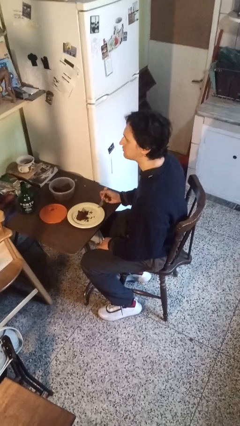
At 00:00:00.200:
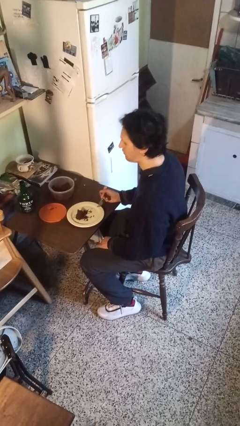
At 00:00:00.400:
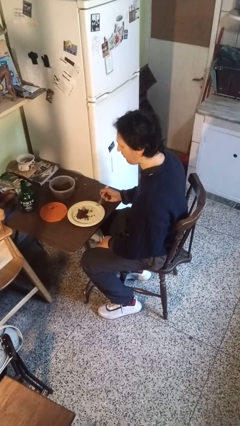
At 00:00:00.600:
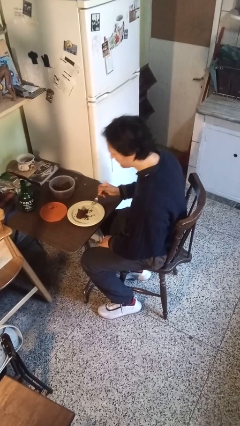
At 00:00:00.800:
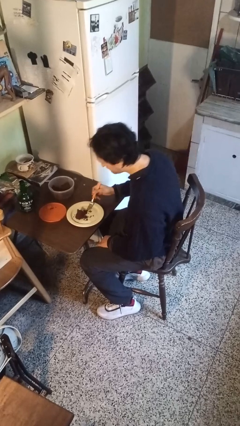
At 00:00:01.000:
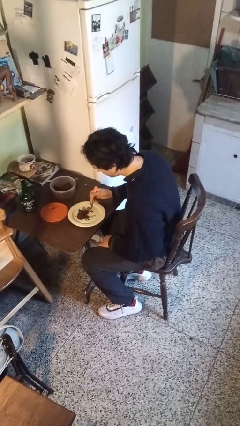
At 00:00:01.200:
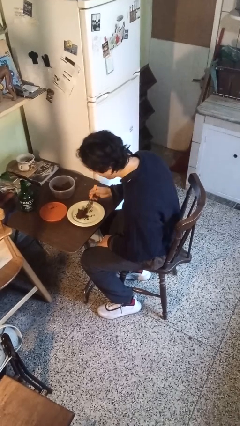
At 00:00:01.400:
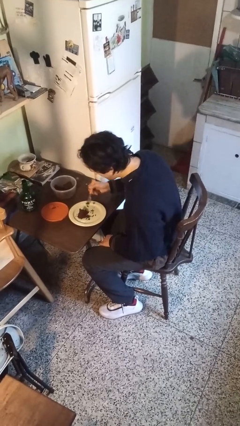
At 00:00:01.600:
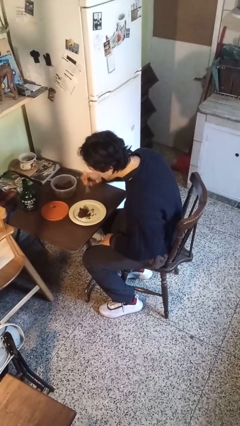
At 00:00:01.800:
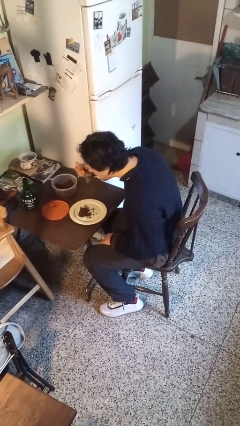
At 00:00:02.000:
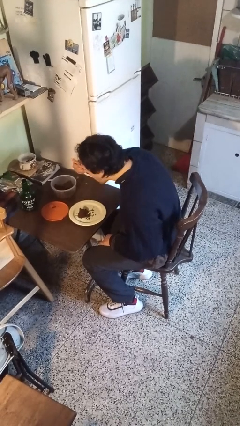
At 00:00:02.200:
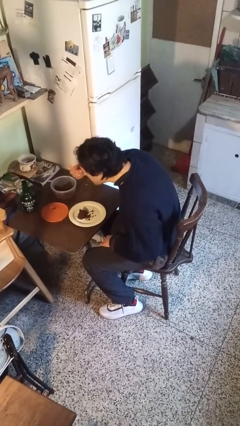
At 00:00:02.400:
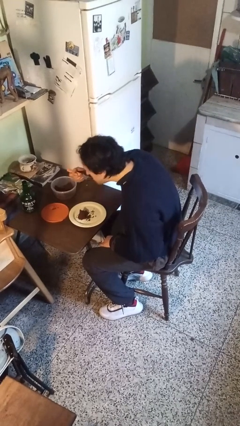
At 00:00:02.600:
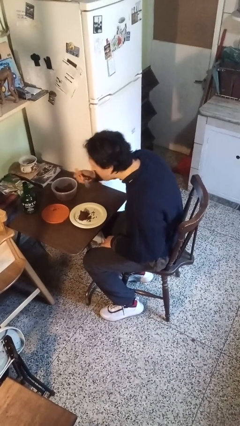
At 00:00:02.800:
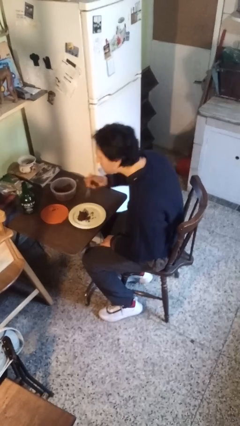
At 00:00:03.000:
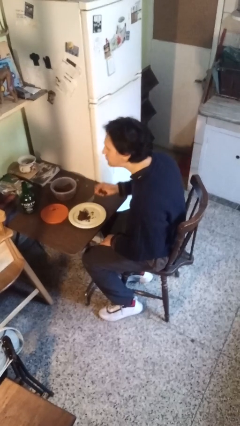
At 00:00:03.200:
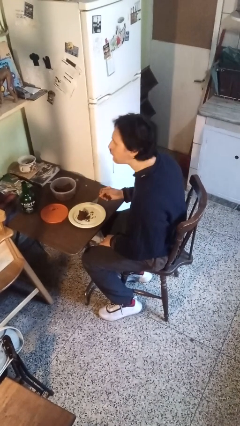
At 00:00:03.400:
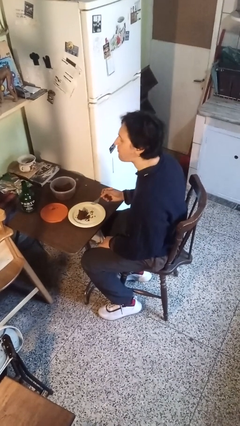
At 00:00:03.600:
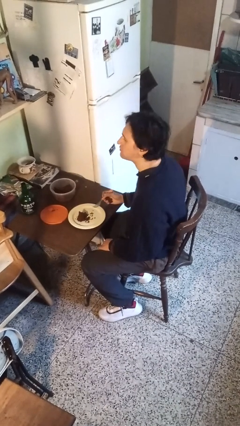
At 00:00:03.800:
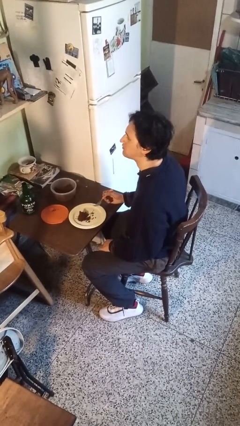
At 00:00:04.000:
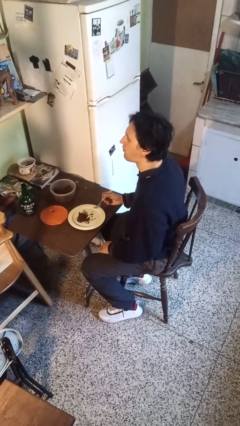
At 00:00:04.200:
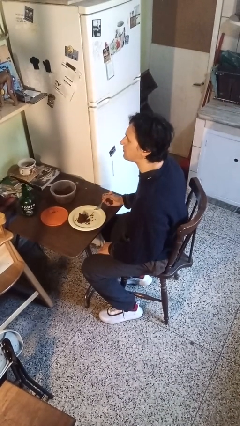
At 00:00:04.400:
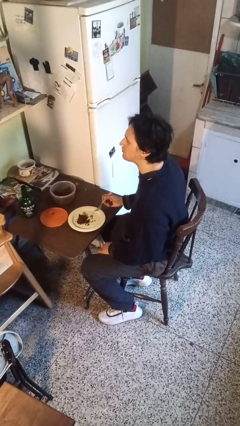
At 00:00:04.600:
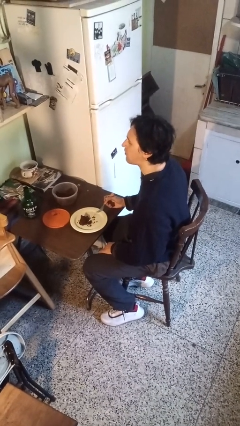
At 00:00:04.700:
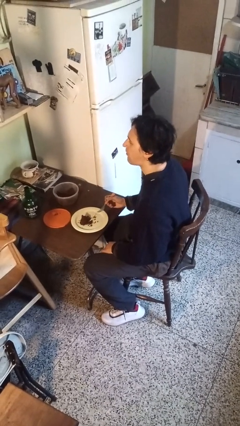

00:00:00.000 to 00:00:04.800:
person eats with utensil

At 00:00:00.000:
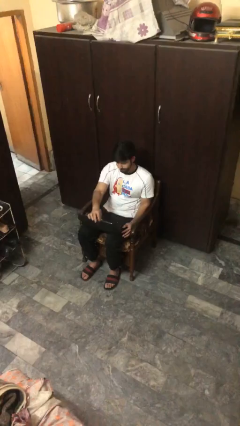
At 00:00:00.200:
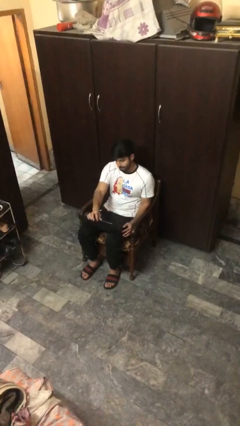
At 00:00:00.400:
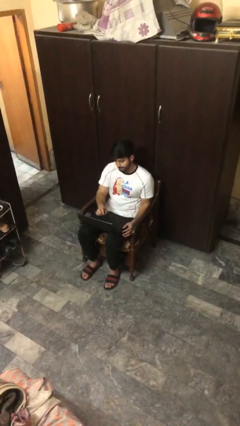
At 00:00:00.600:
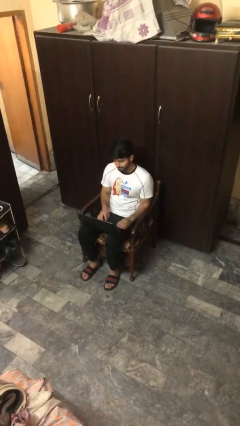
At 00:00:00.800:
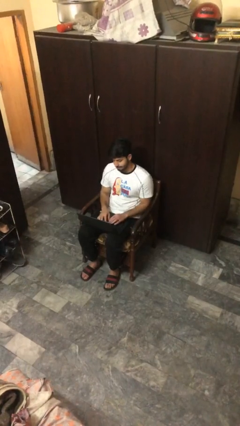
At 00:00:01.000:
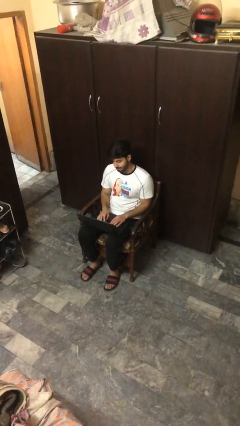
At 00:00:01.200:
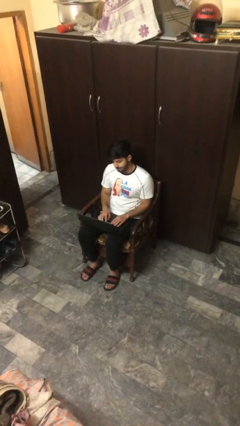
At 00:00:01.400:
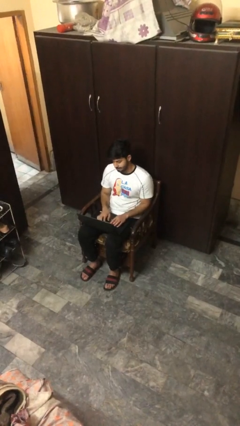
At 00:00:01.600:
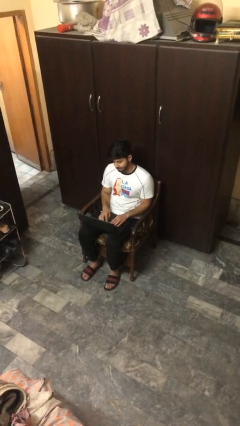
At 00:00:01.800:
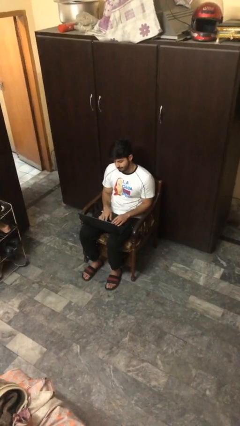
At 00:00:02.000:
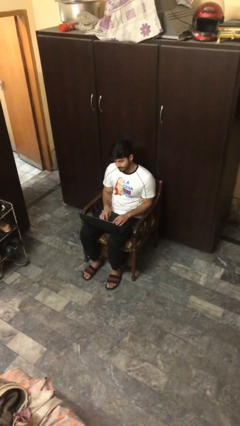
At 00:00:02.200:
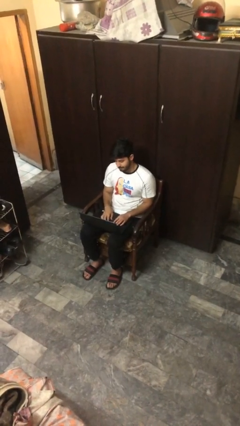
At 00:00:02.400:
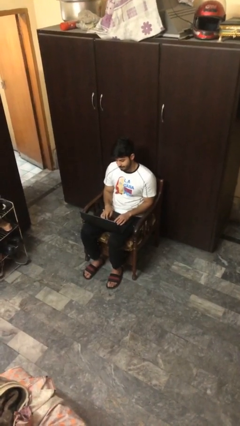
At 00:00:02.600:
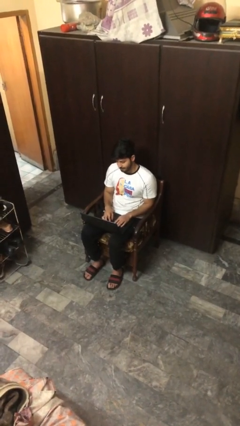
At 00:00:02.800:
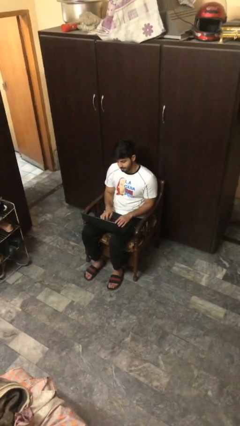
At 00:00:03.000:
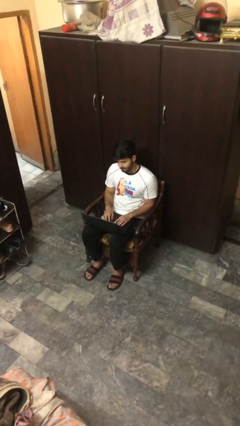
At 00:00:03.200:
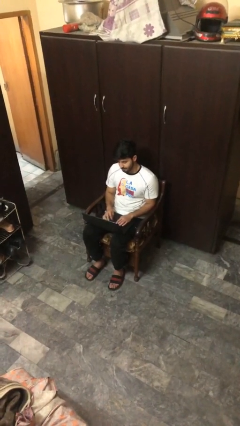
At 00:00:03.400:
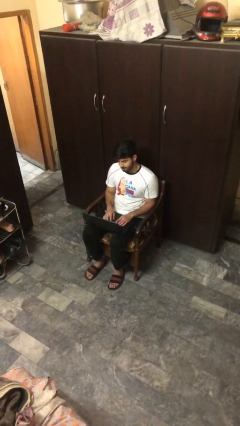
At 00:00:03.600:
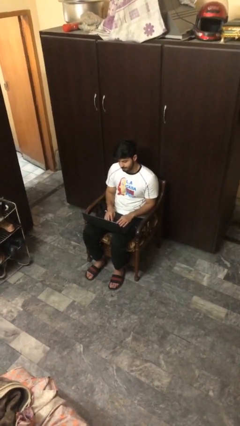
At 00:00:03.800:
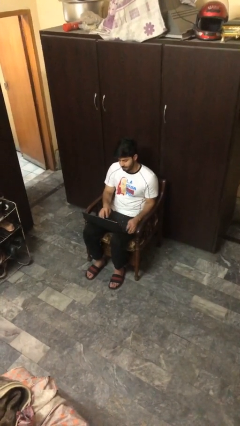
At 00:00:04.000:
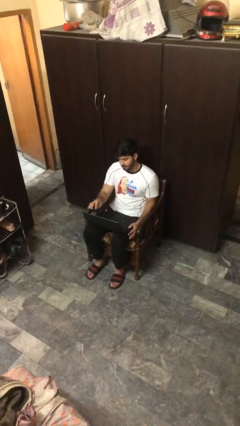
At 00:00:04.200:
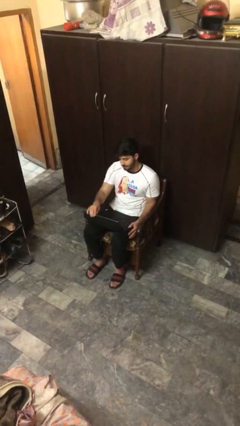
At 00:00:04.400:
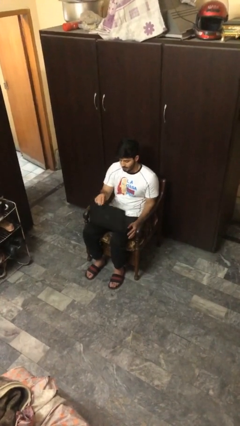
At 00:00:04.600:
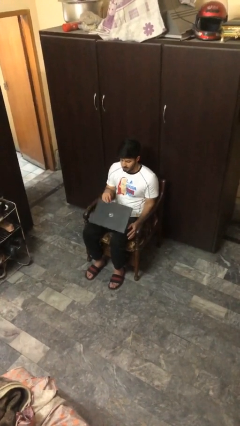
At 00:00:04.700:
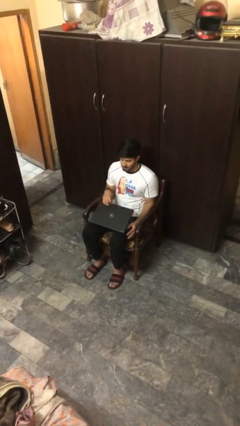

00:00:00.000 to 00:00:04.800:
person interacts with laptop

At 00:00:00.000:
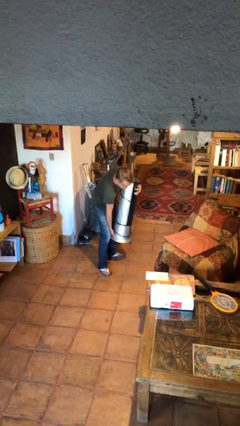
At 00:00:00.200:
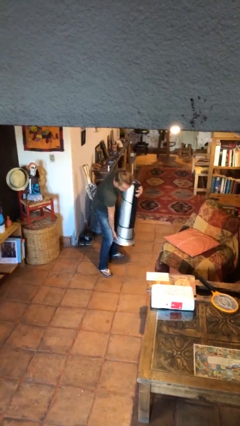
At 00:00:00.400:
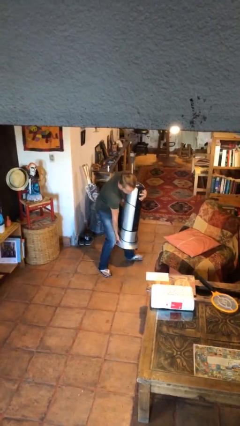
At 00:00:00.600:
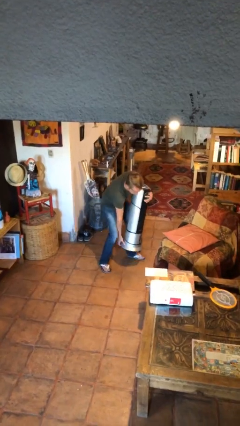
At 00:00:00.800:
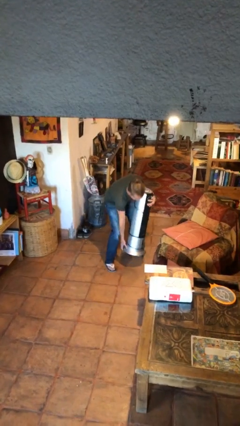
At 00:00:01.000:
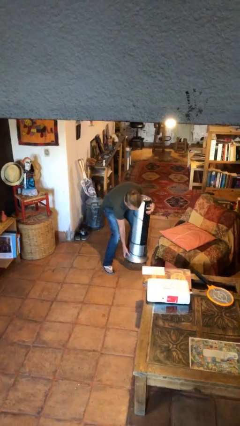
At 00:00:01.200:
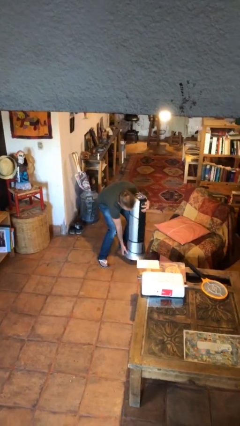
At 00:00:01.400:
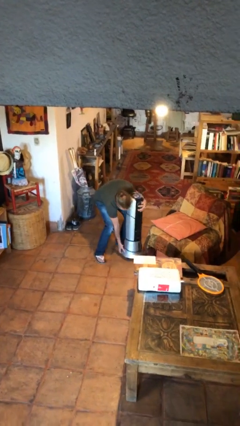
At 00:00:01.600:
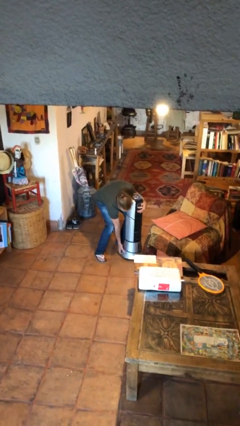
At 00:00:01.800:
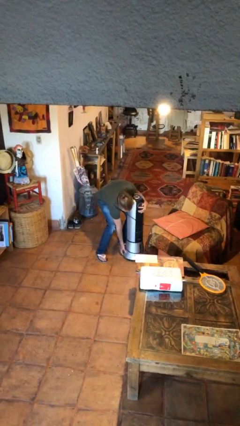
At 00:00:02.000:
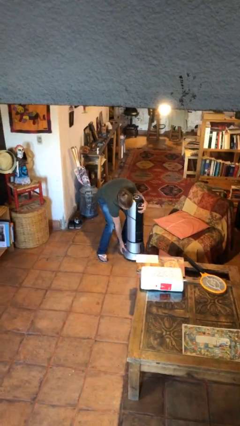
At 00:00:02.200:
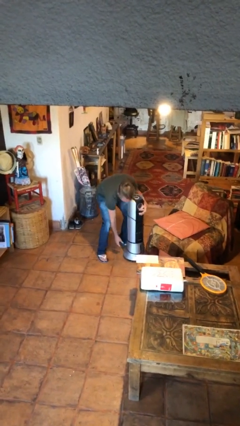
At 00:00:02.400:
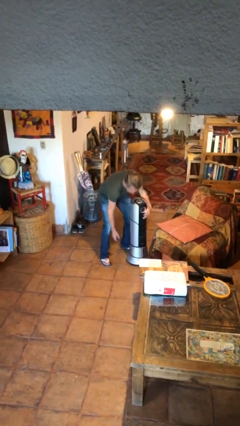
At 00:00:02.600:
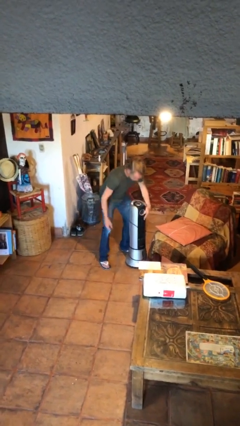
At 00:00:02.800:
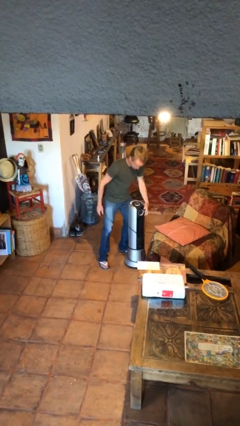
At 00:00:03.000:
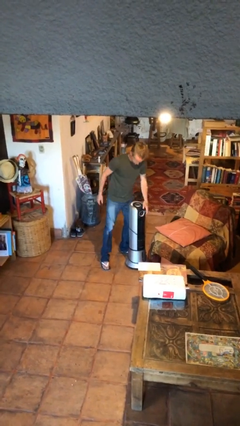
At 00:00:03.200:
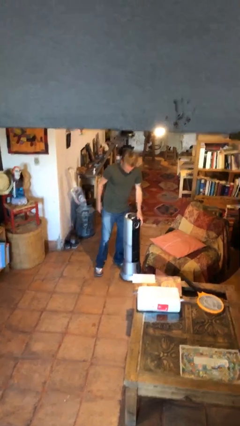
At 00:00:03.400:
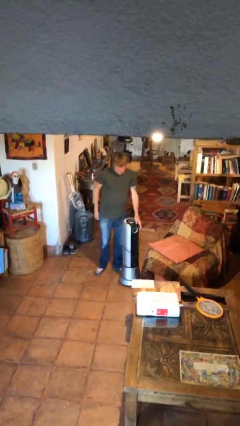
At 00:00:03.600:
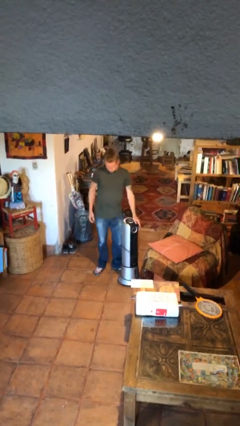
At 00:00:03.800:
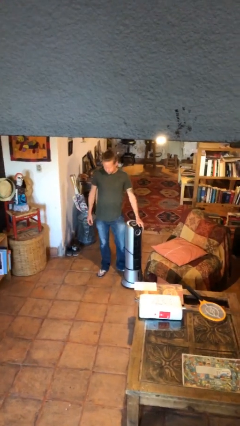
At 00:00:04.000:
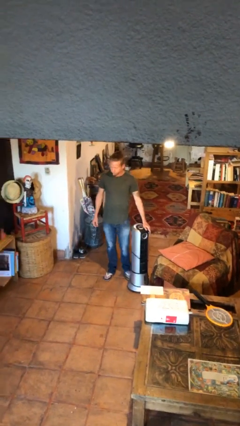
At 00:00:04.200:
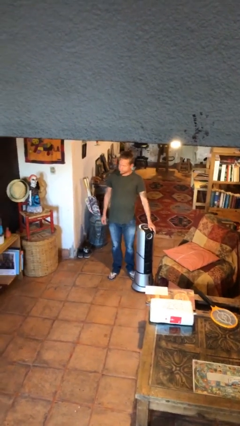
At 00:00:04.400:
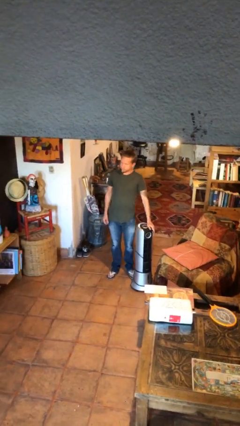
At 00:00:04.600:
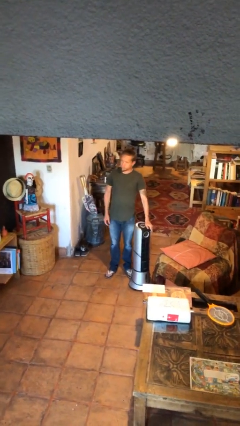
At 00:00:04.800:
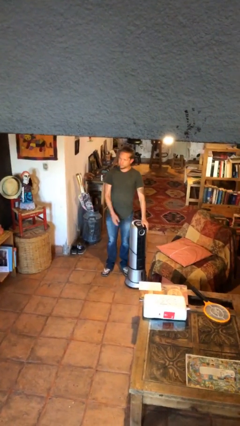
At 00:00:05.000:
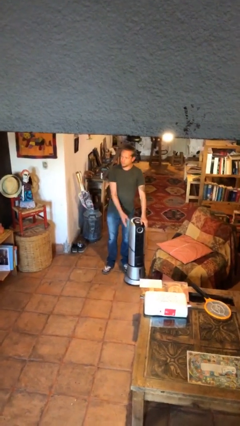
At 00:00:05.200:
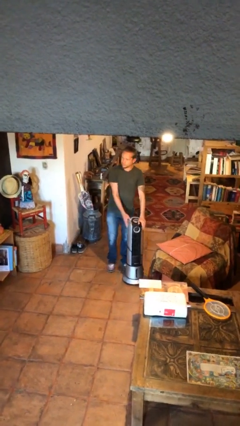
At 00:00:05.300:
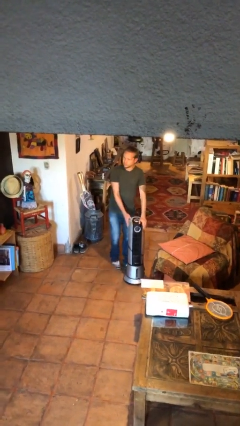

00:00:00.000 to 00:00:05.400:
person puts down object on floor

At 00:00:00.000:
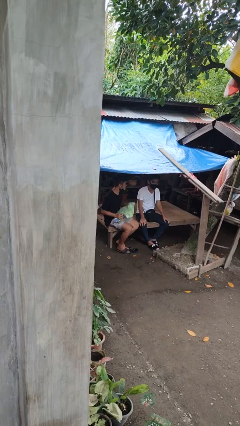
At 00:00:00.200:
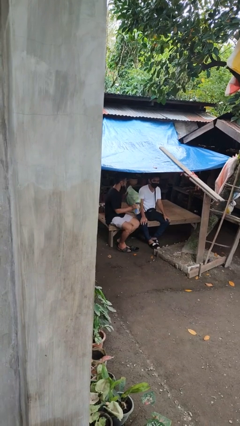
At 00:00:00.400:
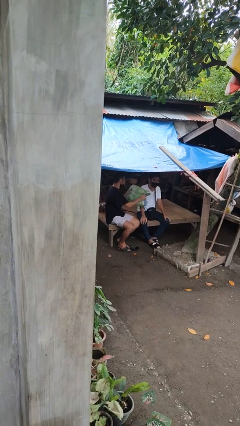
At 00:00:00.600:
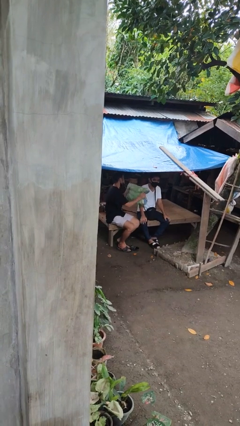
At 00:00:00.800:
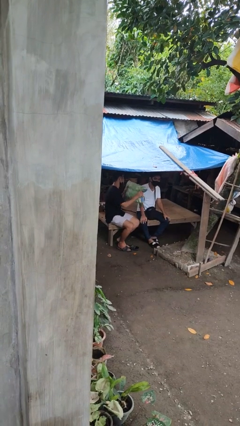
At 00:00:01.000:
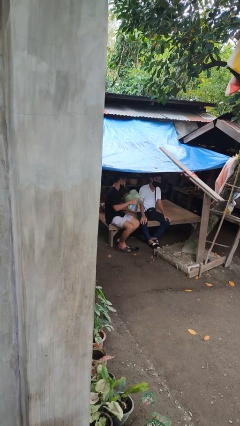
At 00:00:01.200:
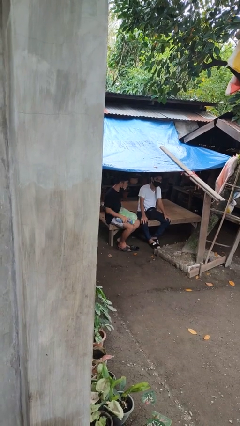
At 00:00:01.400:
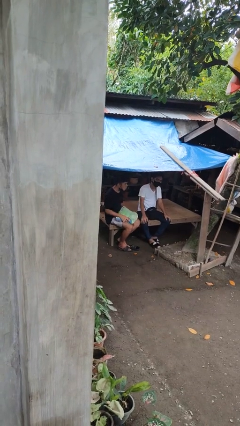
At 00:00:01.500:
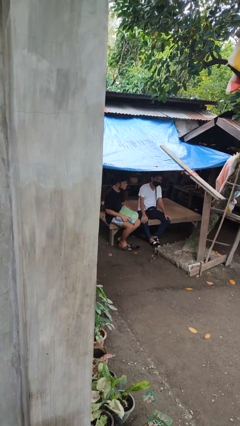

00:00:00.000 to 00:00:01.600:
person hits person with pillow

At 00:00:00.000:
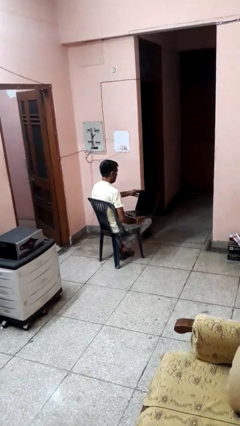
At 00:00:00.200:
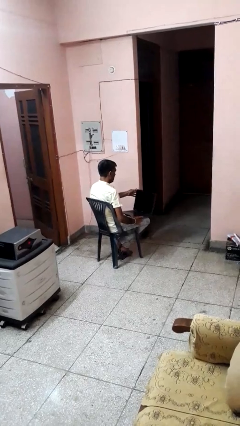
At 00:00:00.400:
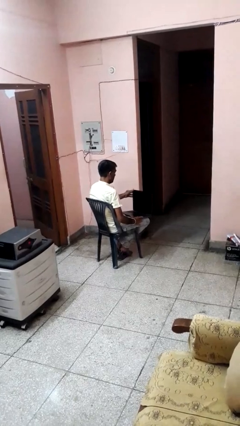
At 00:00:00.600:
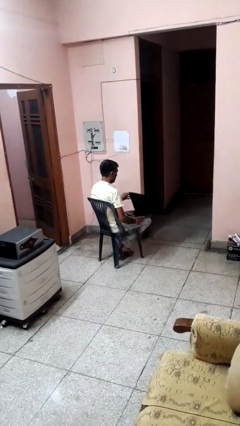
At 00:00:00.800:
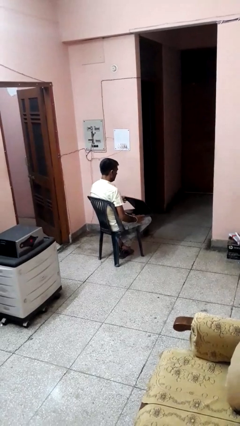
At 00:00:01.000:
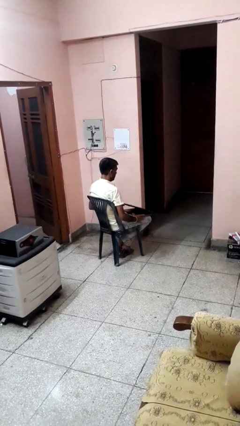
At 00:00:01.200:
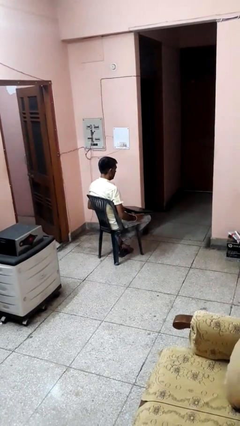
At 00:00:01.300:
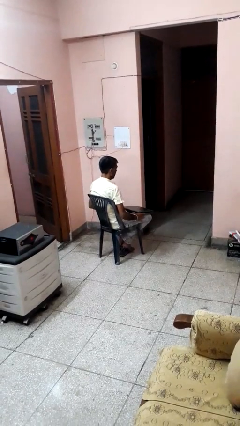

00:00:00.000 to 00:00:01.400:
person closes laptop
